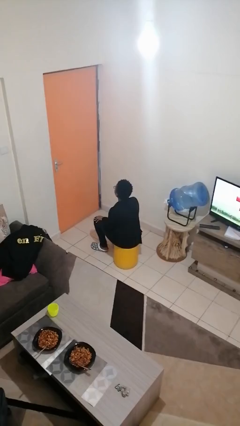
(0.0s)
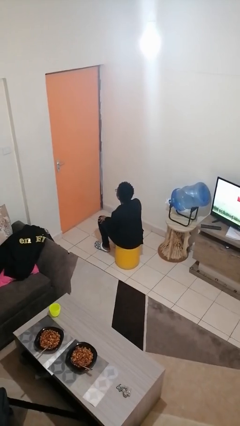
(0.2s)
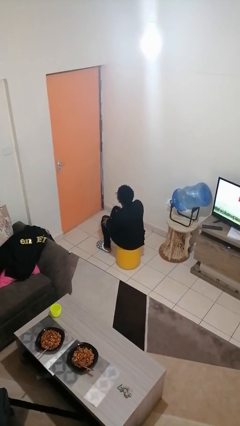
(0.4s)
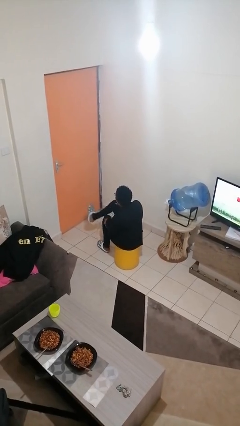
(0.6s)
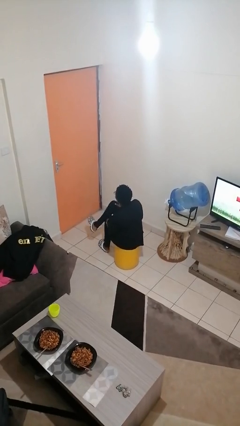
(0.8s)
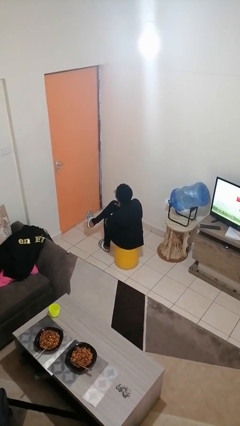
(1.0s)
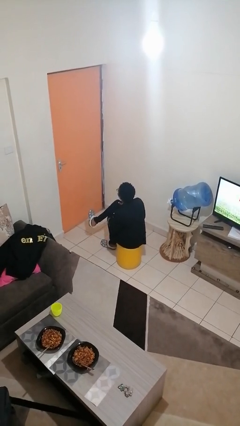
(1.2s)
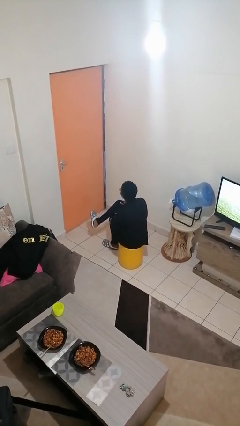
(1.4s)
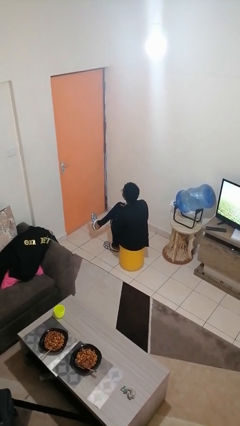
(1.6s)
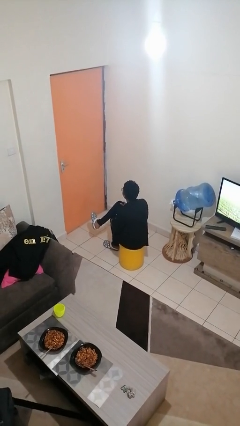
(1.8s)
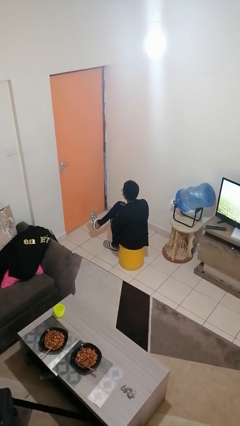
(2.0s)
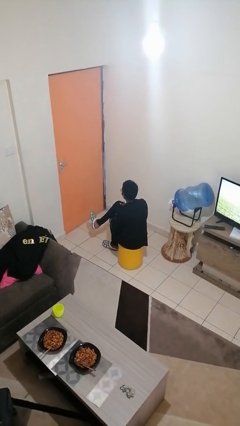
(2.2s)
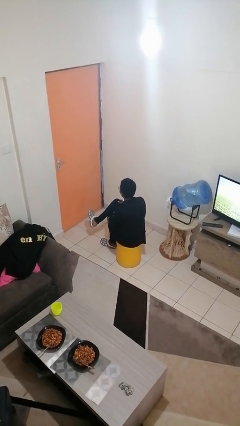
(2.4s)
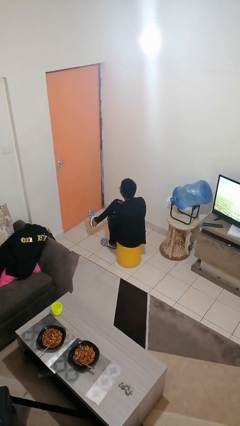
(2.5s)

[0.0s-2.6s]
person crosses legs

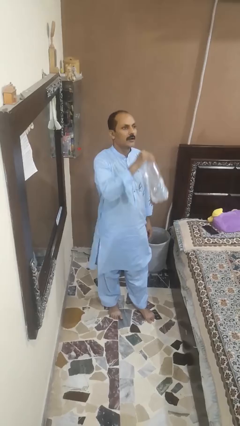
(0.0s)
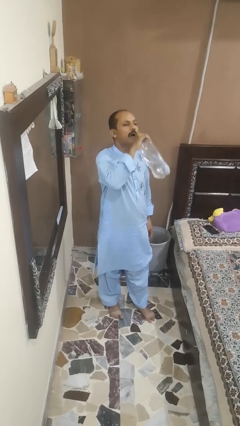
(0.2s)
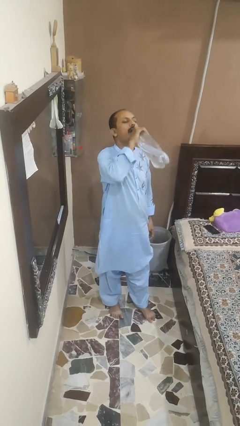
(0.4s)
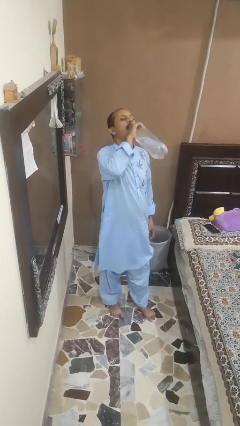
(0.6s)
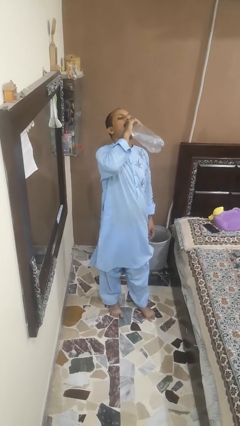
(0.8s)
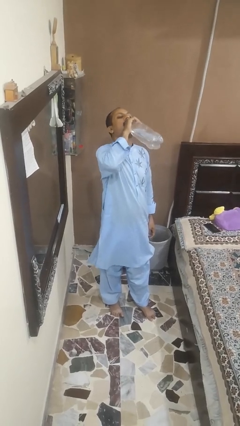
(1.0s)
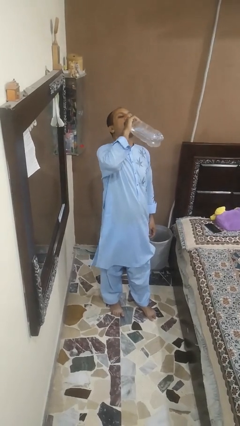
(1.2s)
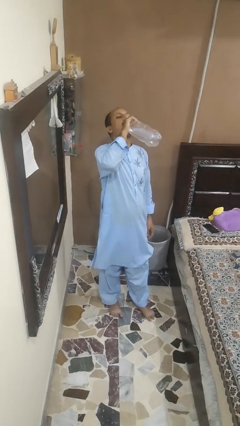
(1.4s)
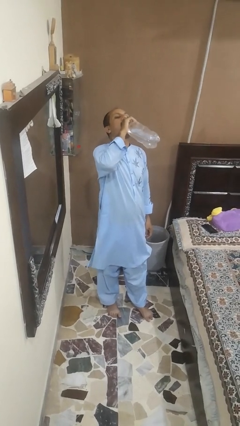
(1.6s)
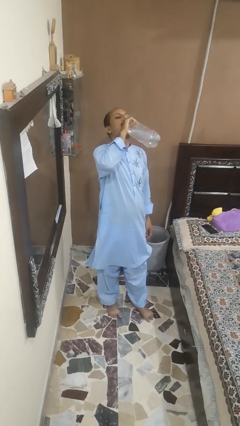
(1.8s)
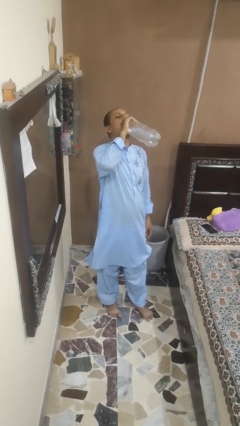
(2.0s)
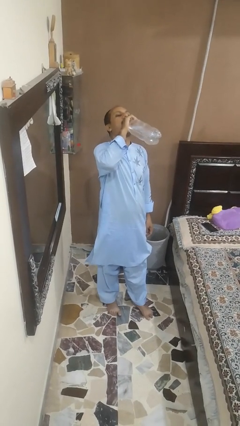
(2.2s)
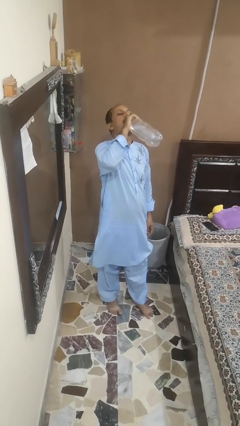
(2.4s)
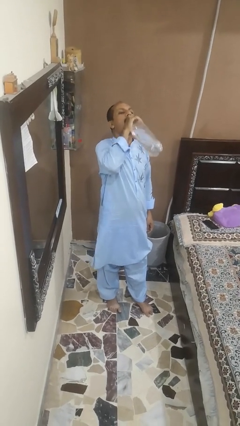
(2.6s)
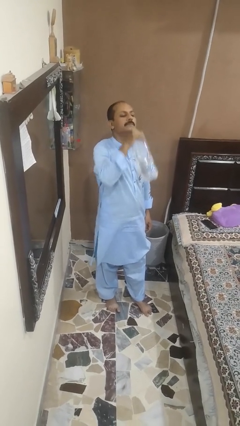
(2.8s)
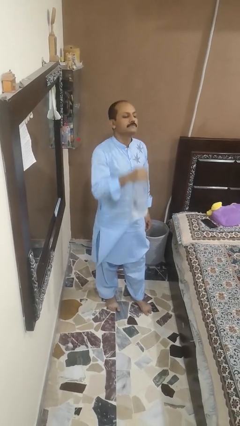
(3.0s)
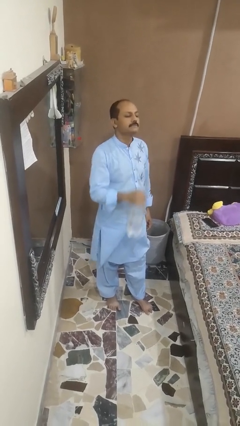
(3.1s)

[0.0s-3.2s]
person drinks from bottle

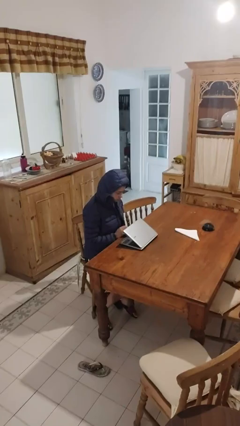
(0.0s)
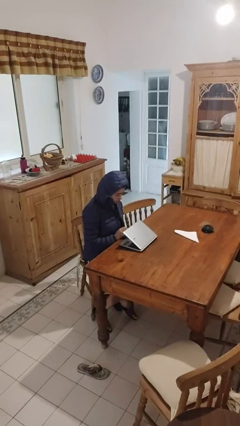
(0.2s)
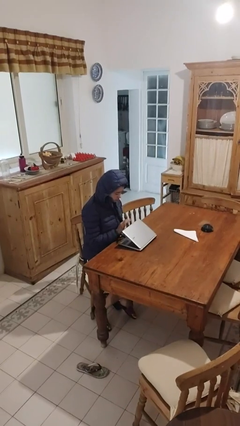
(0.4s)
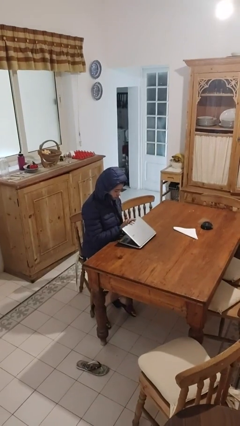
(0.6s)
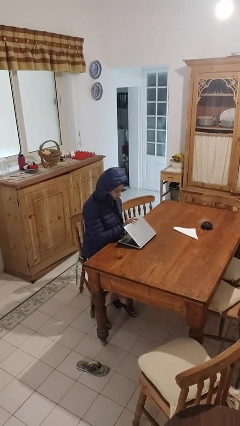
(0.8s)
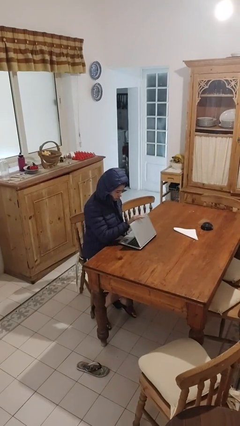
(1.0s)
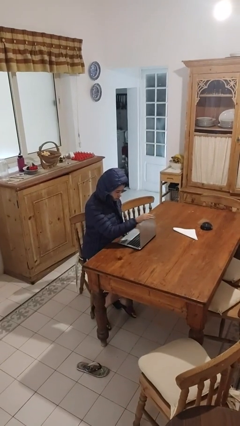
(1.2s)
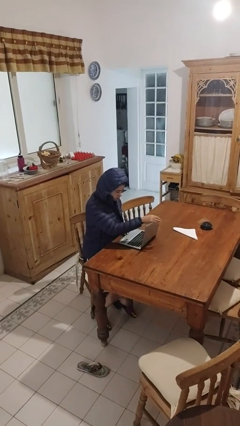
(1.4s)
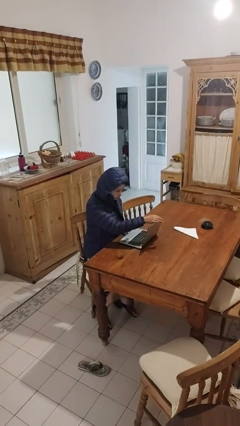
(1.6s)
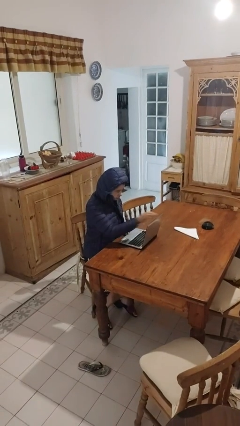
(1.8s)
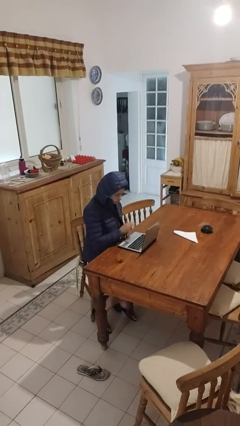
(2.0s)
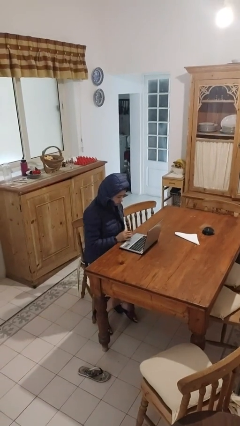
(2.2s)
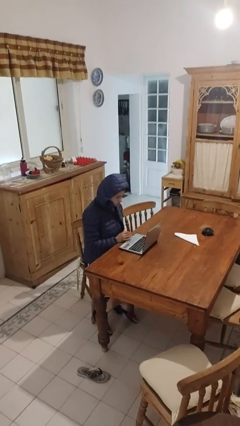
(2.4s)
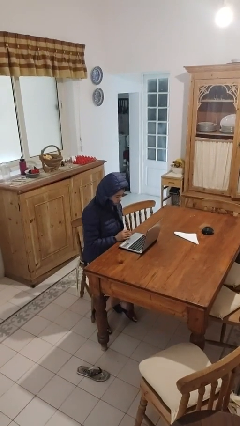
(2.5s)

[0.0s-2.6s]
person opens laptop

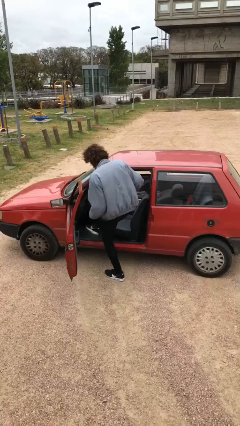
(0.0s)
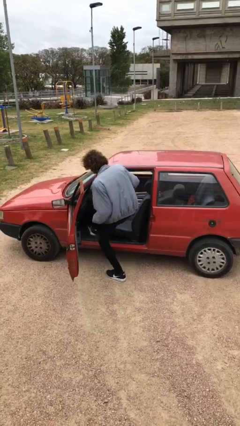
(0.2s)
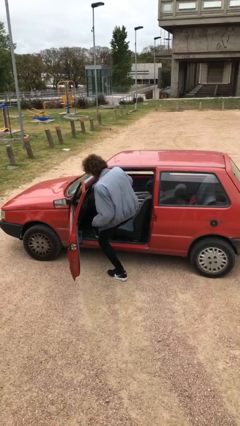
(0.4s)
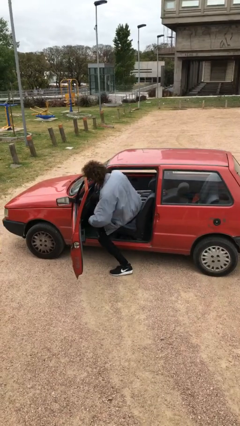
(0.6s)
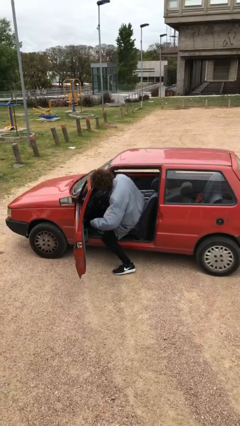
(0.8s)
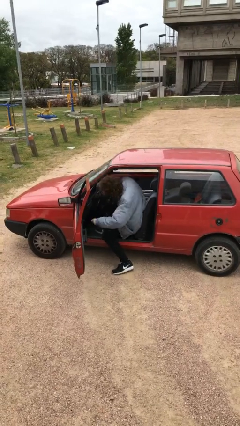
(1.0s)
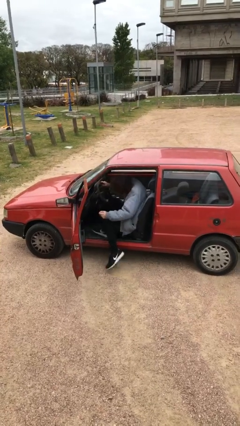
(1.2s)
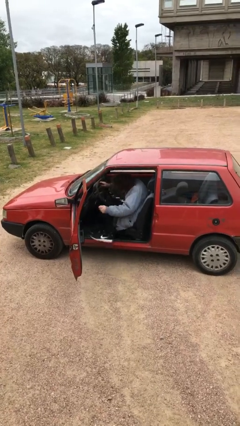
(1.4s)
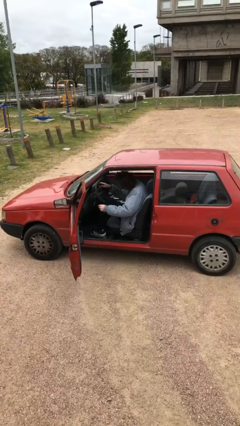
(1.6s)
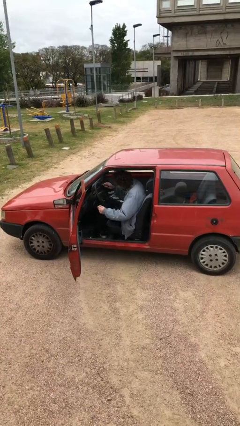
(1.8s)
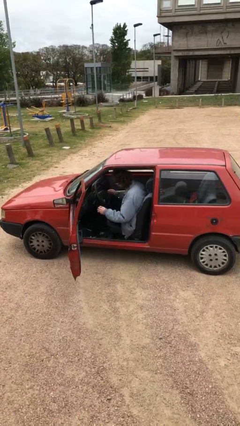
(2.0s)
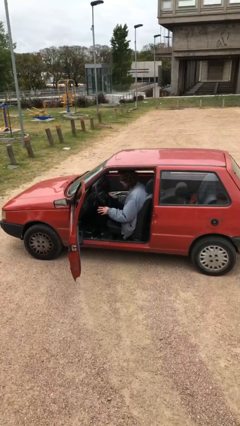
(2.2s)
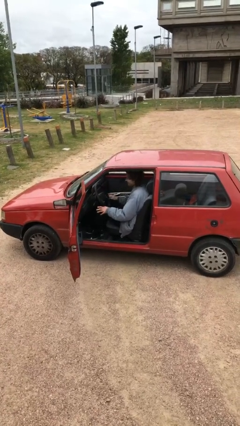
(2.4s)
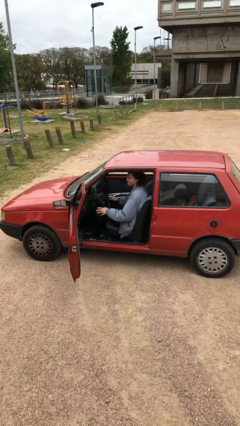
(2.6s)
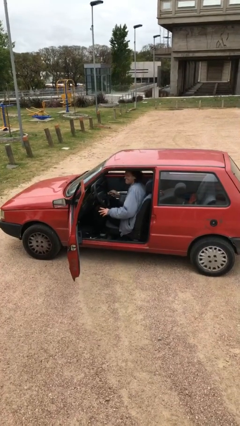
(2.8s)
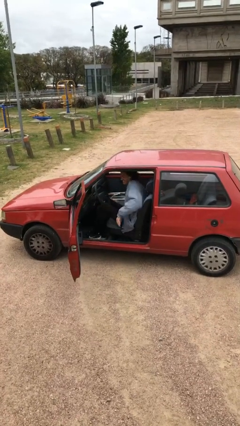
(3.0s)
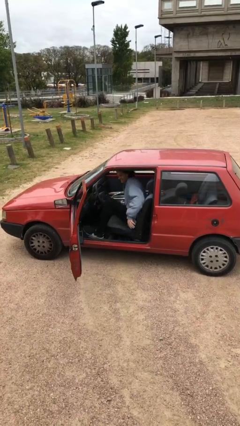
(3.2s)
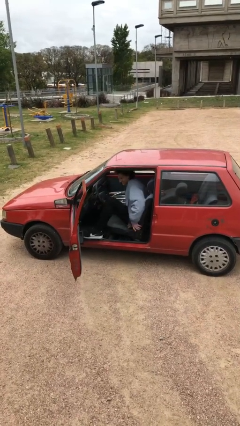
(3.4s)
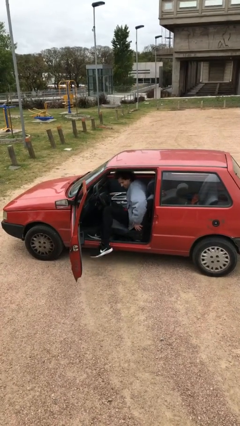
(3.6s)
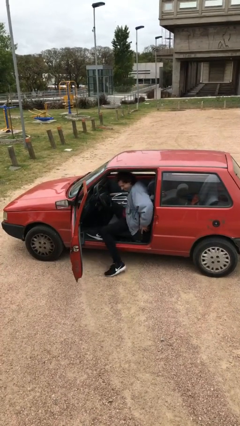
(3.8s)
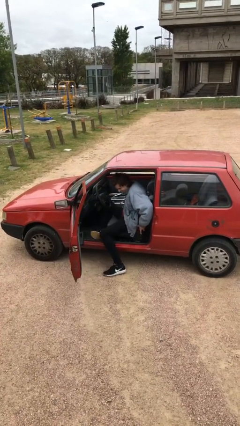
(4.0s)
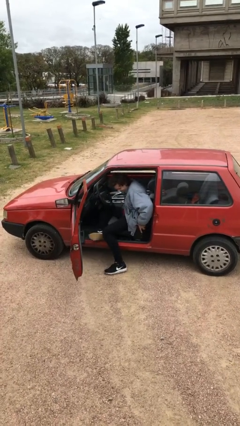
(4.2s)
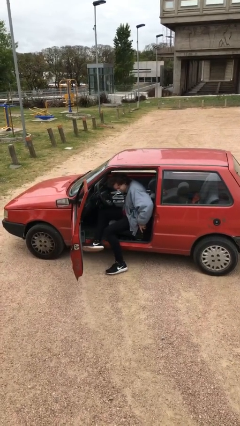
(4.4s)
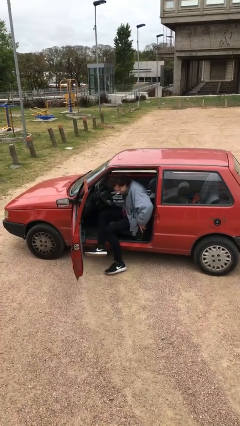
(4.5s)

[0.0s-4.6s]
person enters car

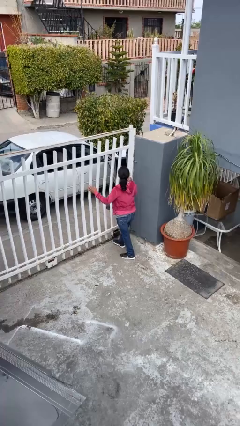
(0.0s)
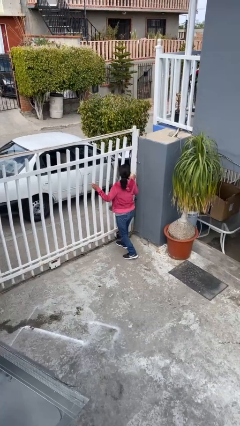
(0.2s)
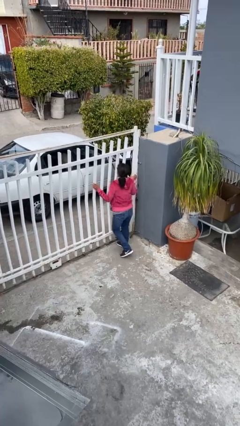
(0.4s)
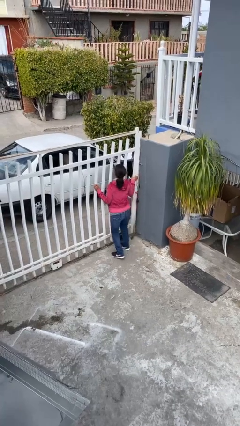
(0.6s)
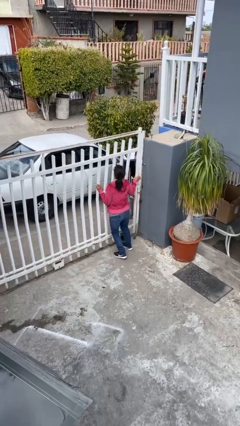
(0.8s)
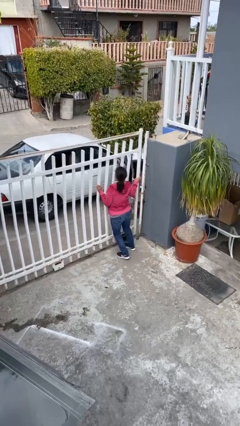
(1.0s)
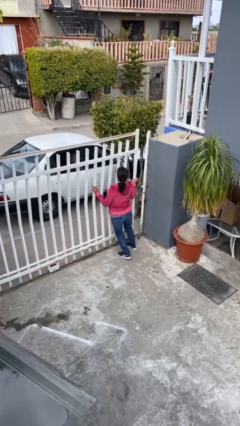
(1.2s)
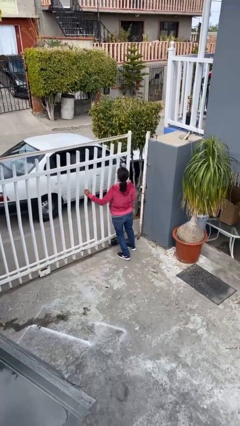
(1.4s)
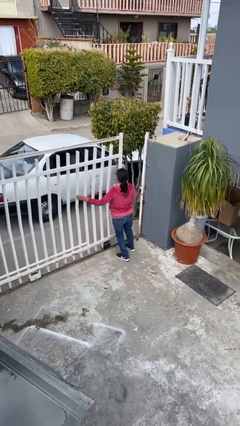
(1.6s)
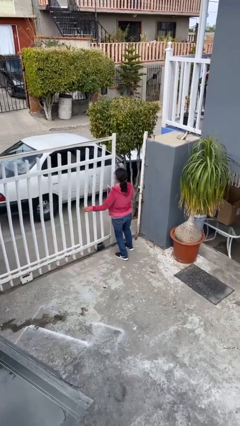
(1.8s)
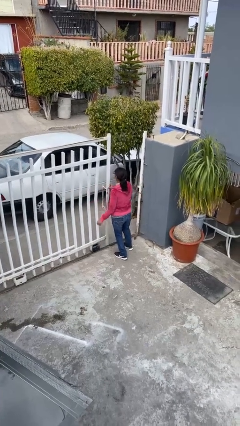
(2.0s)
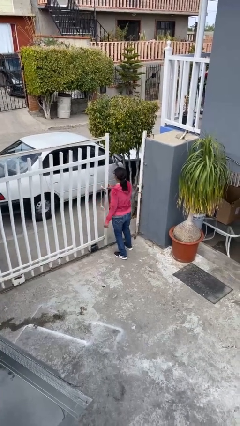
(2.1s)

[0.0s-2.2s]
person opens facility door

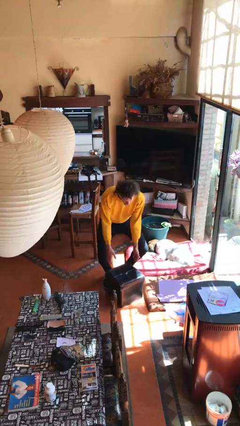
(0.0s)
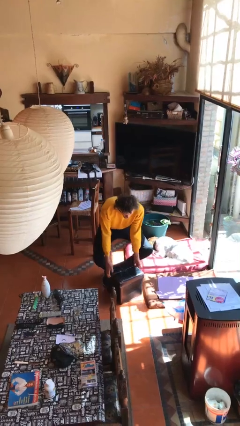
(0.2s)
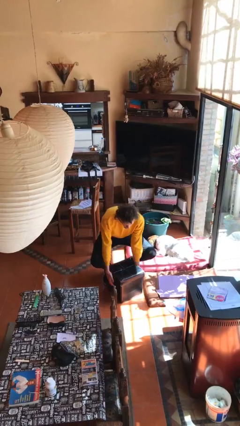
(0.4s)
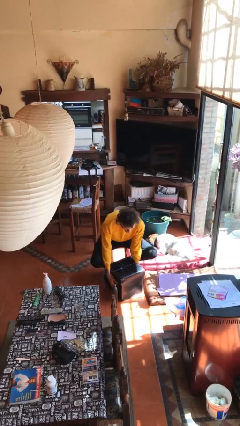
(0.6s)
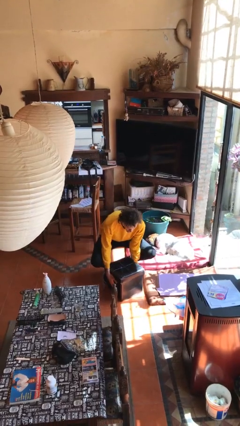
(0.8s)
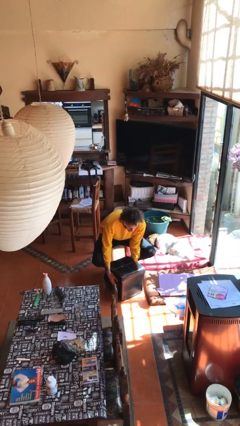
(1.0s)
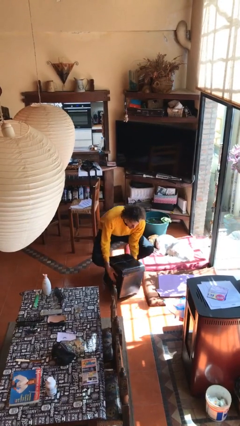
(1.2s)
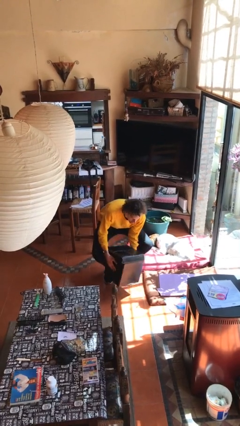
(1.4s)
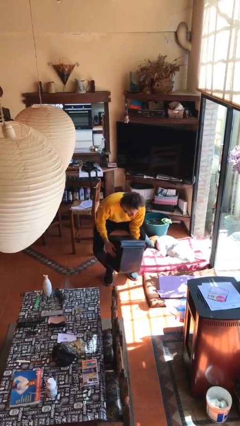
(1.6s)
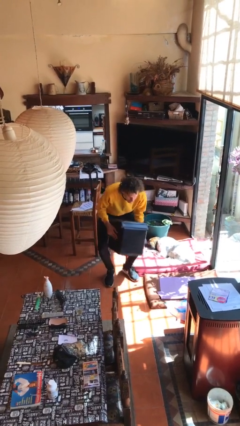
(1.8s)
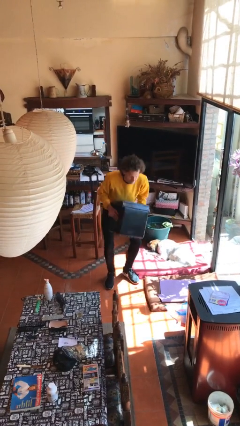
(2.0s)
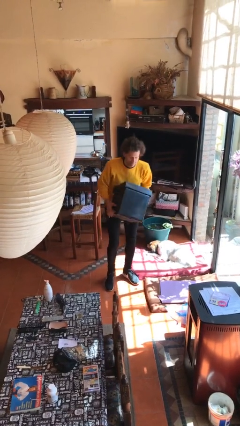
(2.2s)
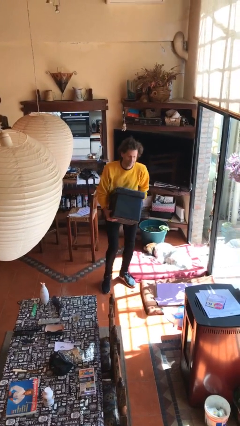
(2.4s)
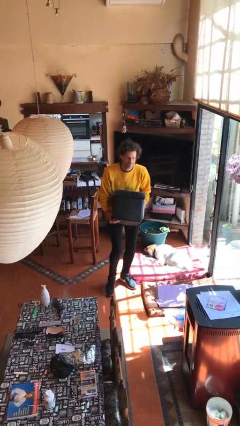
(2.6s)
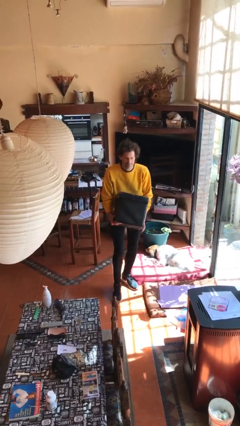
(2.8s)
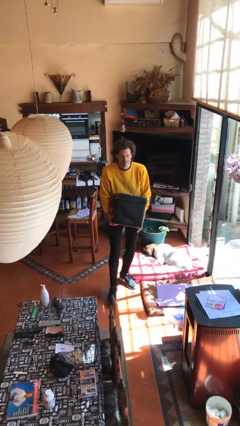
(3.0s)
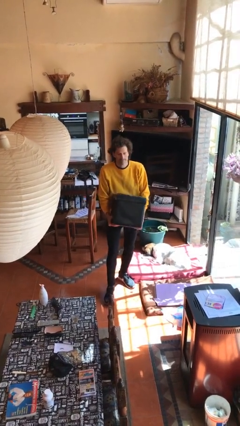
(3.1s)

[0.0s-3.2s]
person picks up object from floor
